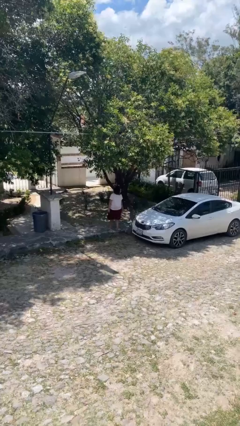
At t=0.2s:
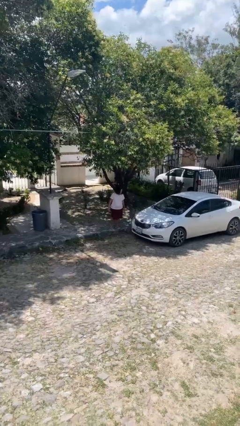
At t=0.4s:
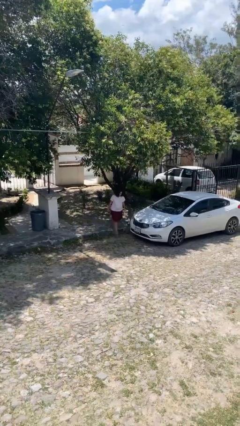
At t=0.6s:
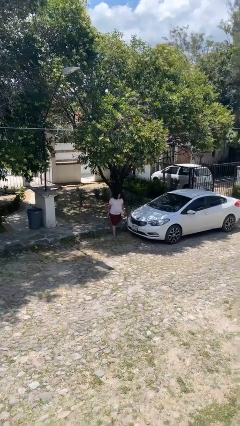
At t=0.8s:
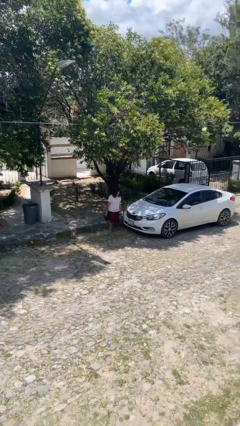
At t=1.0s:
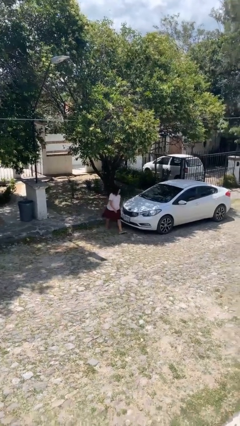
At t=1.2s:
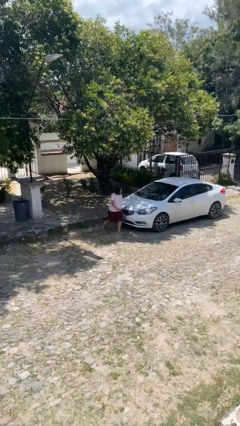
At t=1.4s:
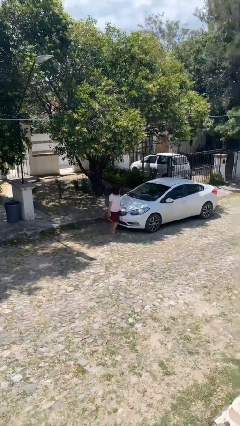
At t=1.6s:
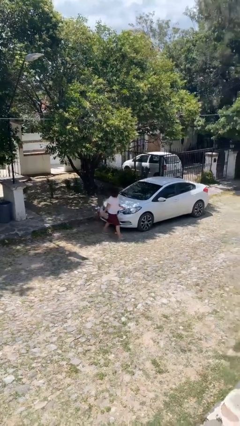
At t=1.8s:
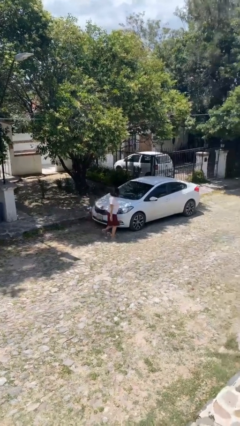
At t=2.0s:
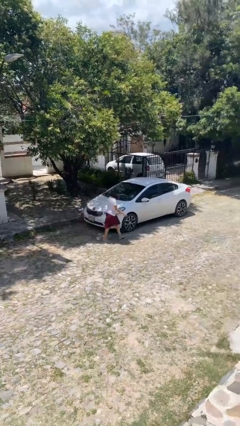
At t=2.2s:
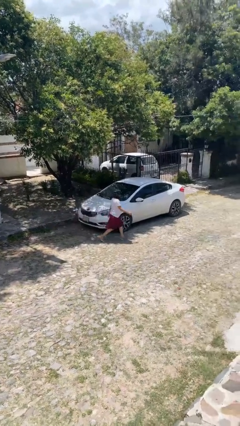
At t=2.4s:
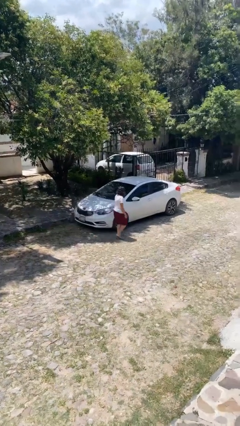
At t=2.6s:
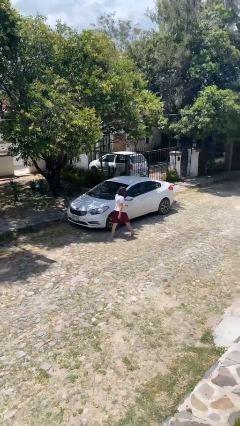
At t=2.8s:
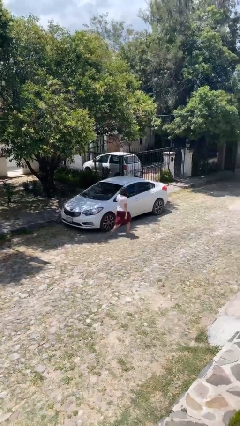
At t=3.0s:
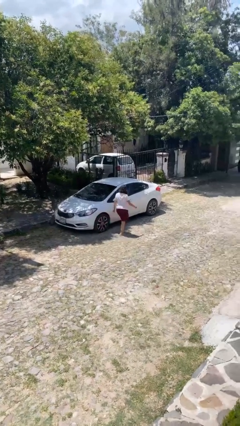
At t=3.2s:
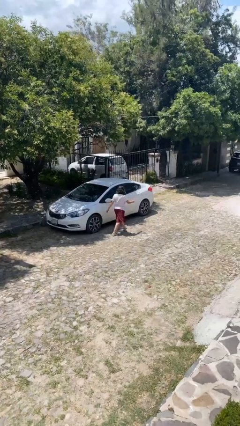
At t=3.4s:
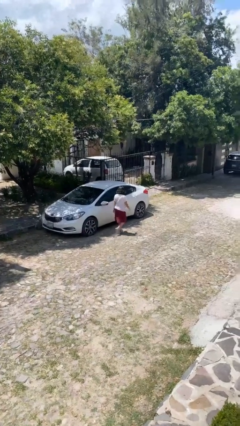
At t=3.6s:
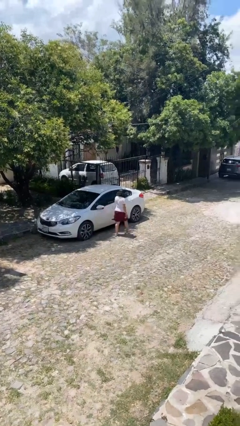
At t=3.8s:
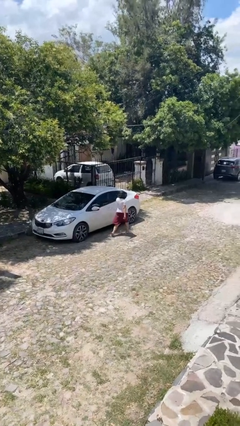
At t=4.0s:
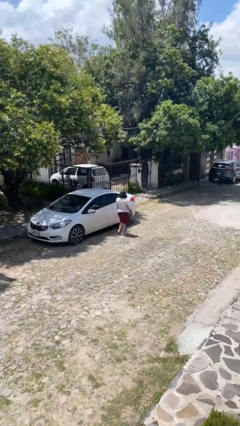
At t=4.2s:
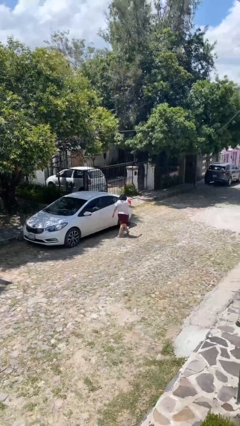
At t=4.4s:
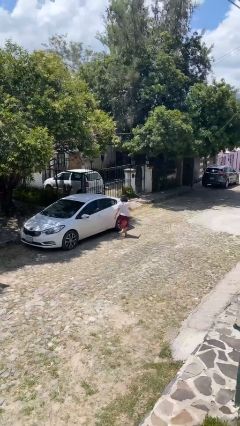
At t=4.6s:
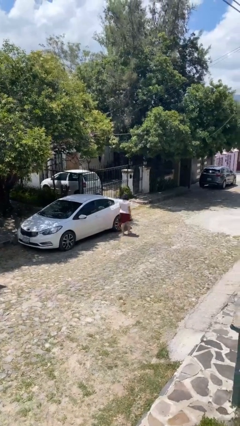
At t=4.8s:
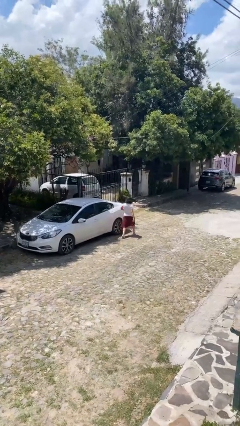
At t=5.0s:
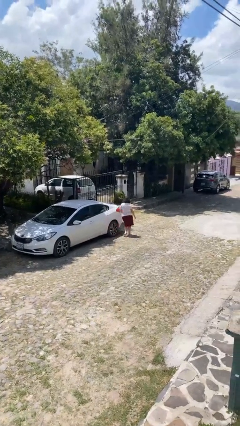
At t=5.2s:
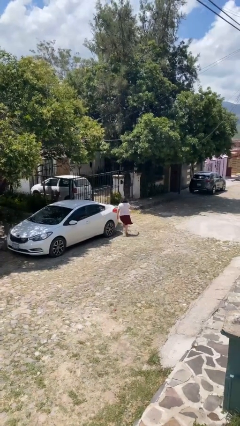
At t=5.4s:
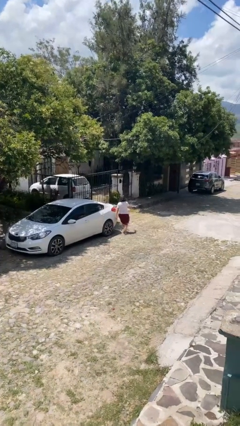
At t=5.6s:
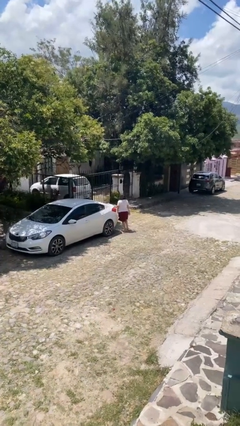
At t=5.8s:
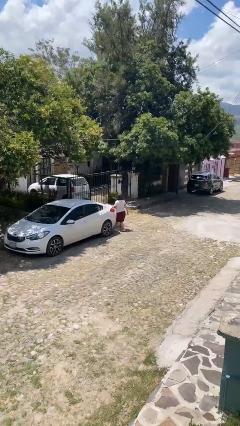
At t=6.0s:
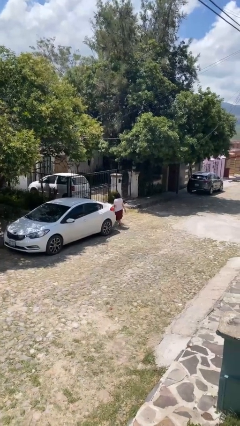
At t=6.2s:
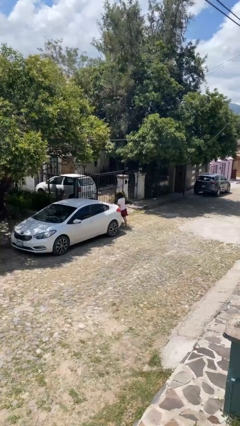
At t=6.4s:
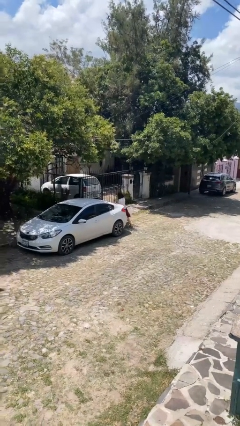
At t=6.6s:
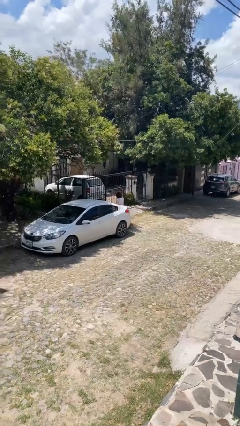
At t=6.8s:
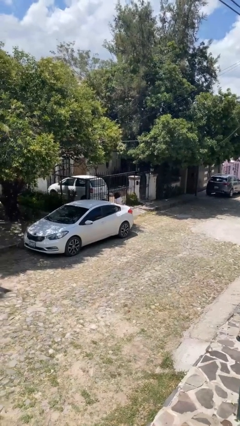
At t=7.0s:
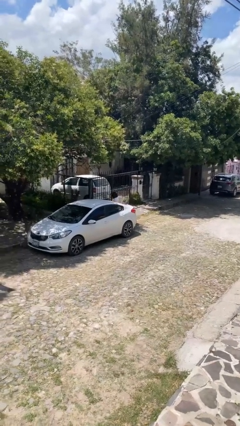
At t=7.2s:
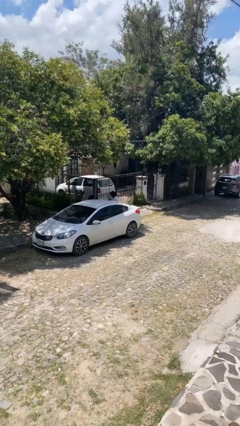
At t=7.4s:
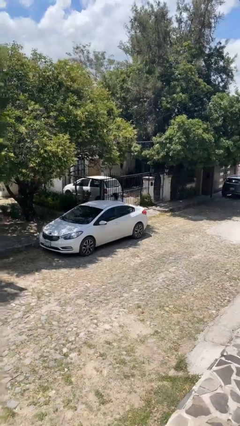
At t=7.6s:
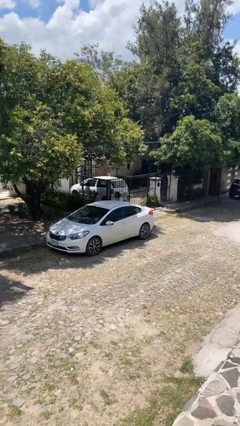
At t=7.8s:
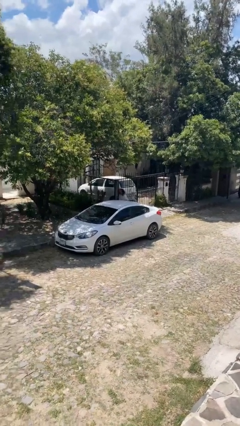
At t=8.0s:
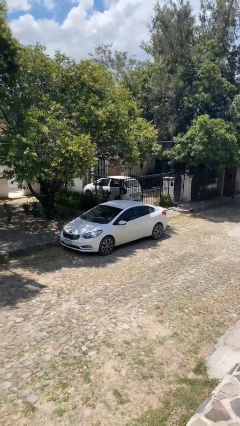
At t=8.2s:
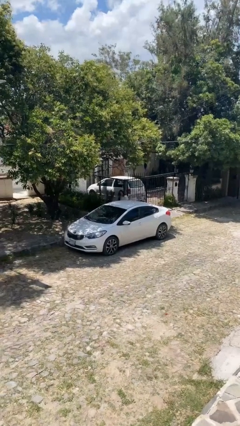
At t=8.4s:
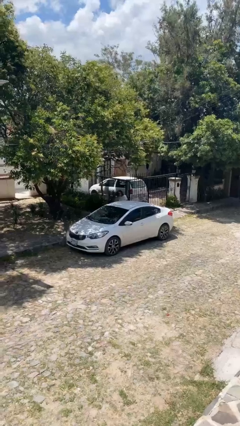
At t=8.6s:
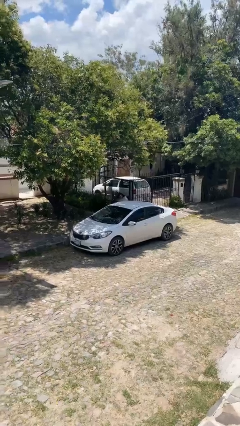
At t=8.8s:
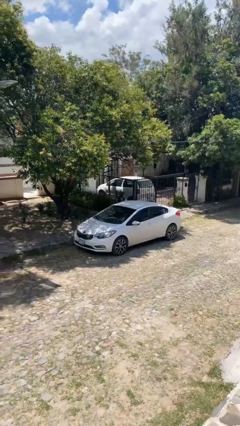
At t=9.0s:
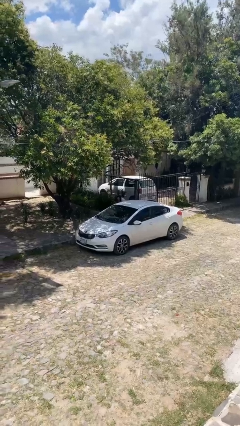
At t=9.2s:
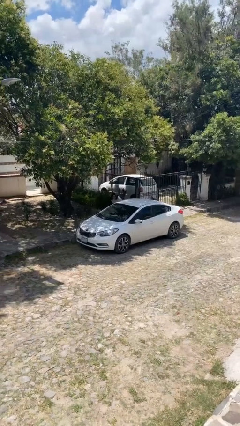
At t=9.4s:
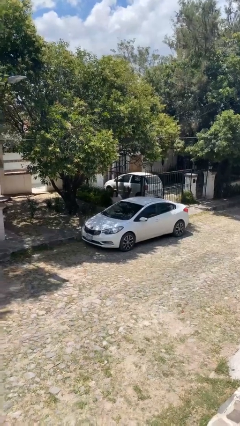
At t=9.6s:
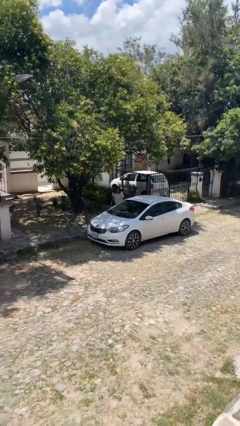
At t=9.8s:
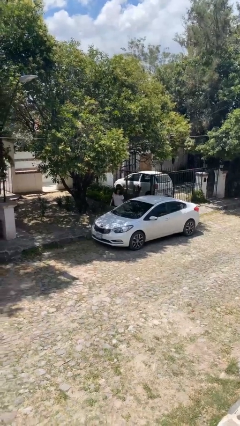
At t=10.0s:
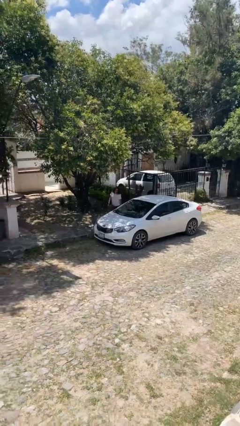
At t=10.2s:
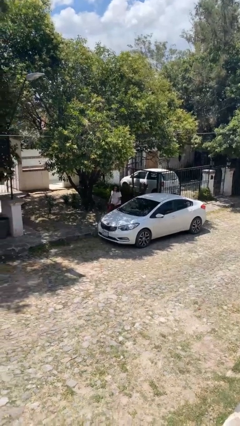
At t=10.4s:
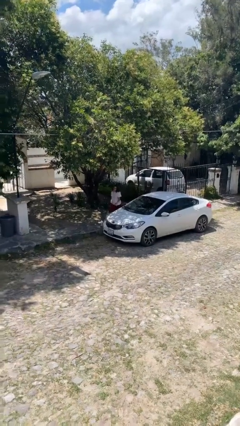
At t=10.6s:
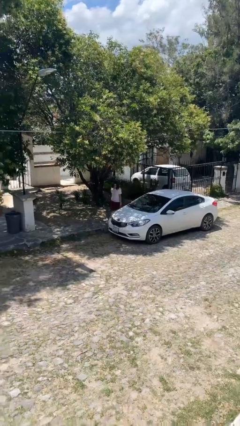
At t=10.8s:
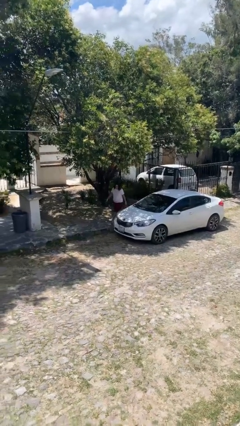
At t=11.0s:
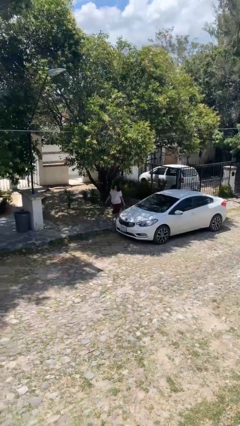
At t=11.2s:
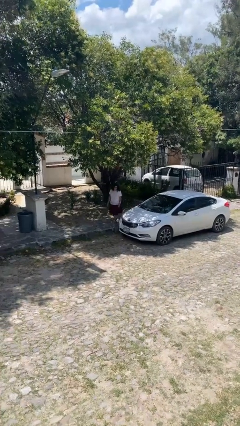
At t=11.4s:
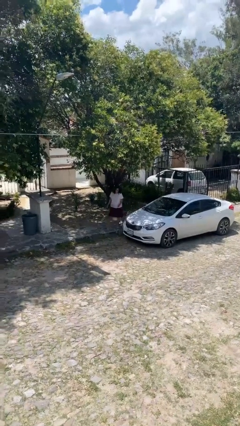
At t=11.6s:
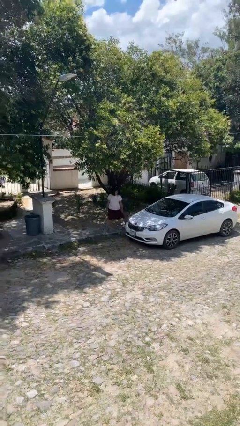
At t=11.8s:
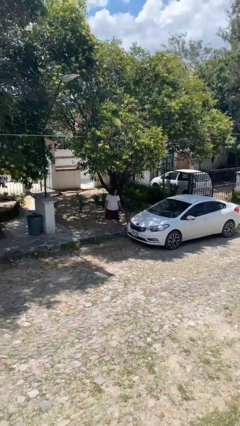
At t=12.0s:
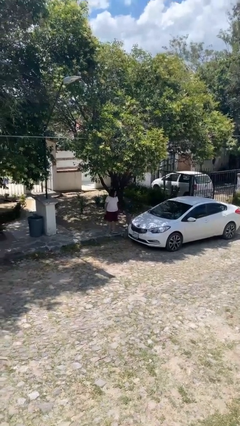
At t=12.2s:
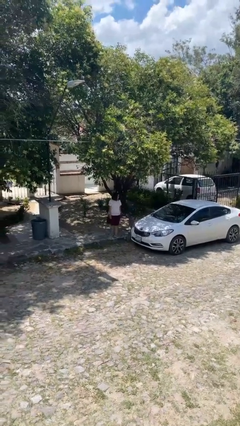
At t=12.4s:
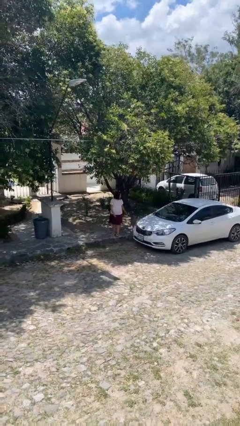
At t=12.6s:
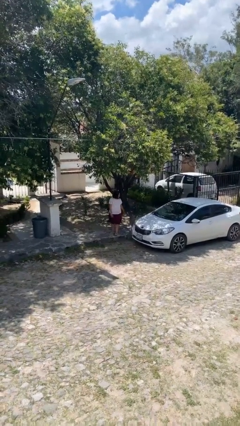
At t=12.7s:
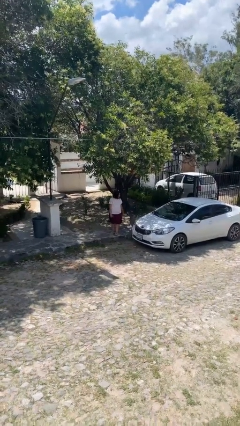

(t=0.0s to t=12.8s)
person walks around car

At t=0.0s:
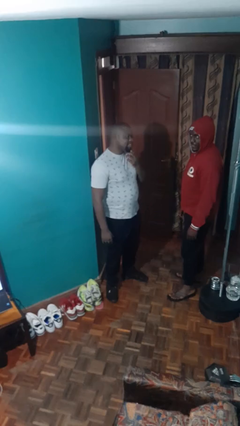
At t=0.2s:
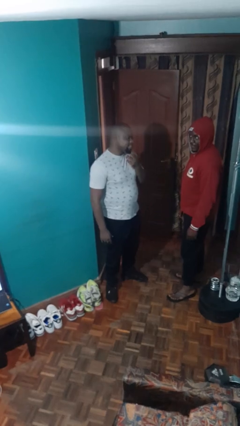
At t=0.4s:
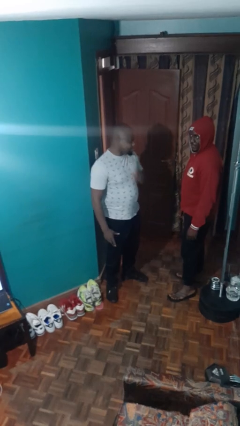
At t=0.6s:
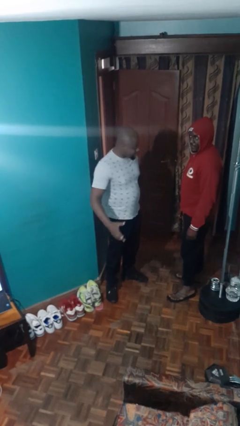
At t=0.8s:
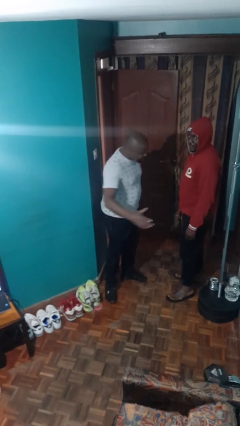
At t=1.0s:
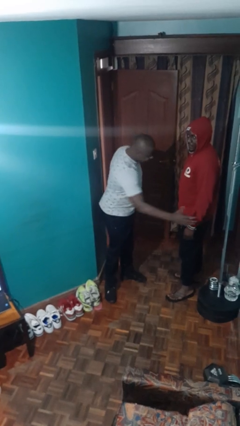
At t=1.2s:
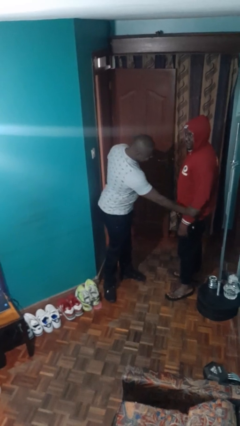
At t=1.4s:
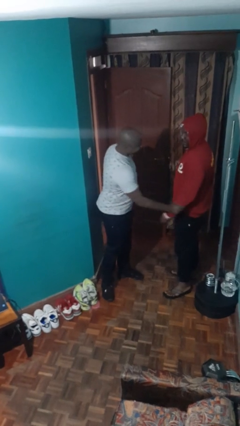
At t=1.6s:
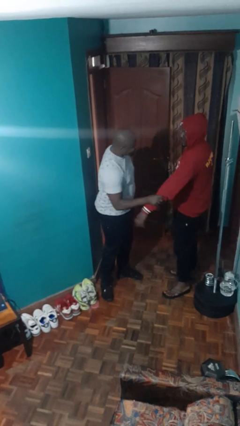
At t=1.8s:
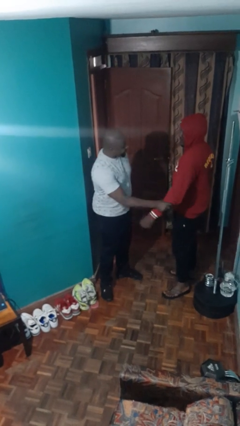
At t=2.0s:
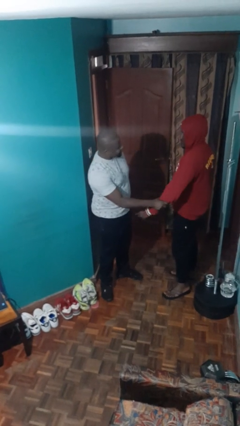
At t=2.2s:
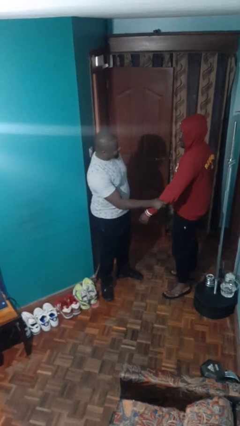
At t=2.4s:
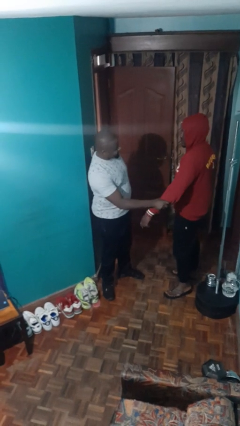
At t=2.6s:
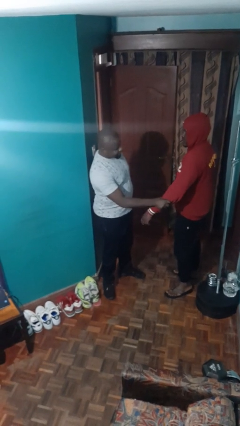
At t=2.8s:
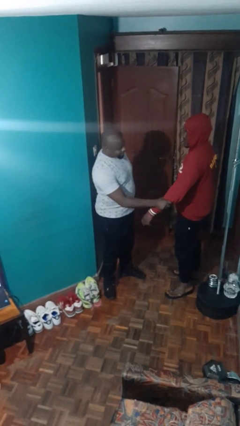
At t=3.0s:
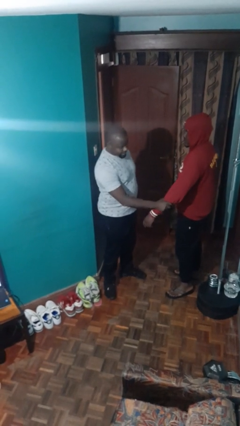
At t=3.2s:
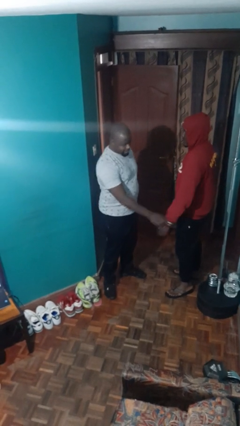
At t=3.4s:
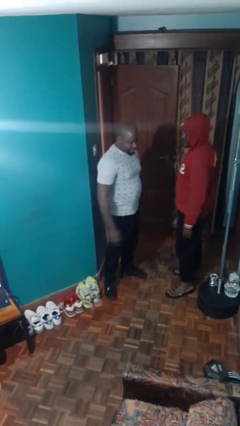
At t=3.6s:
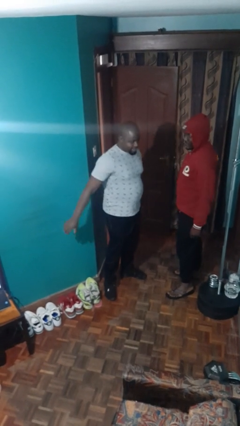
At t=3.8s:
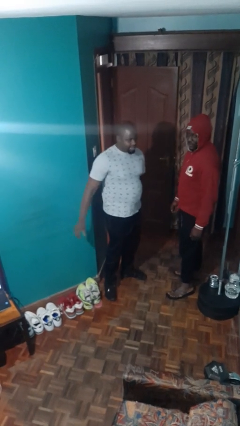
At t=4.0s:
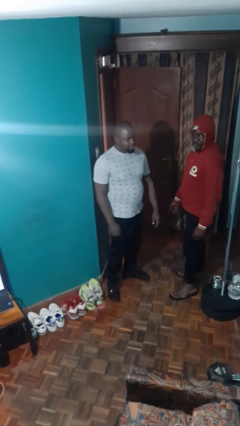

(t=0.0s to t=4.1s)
person grabs person by forearm

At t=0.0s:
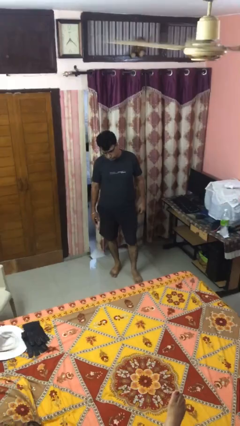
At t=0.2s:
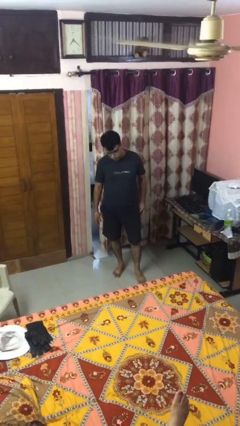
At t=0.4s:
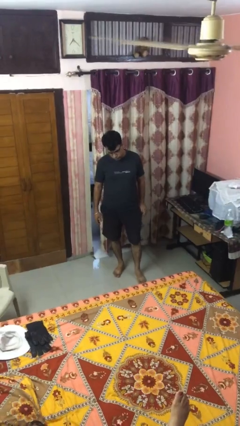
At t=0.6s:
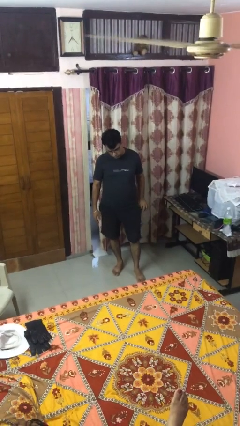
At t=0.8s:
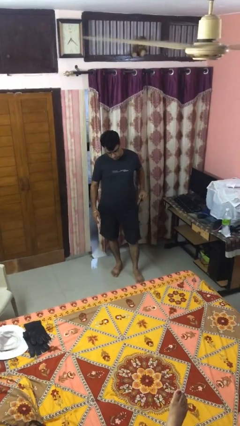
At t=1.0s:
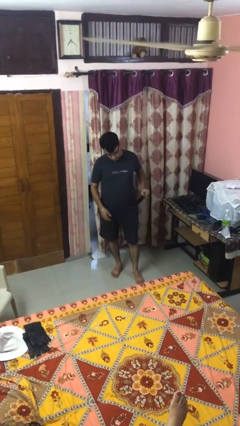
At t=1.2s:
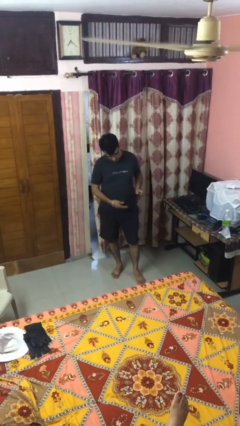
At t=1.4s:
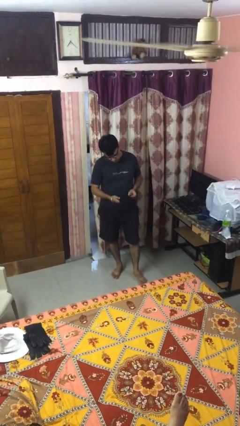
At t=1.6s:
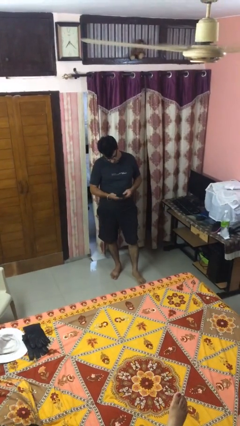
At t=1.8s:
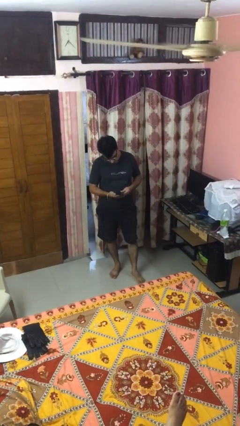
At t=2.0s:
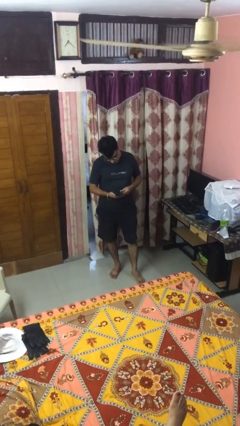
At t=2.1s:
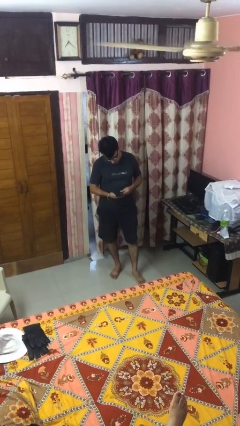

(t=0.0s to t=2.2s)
person takes phone from pocket
